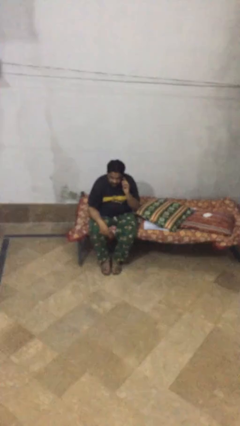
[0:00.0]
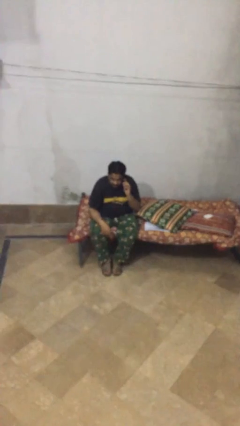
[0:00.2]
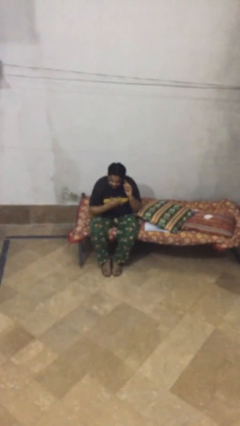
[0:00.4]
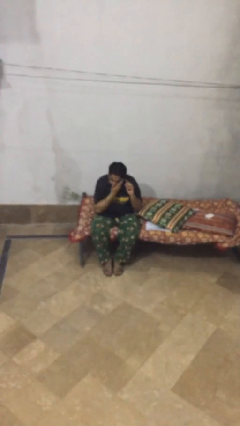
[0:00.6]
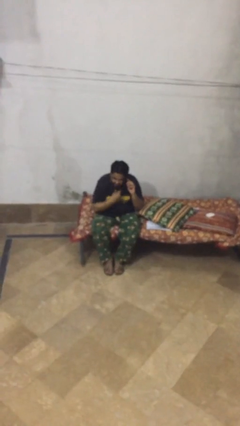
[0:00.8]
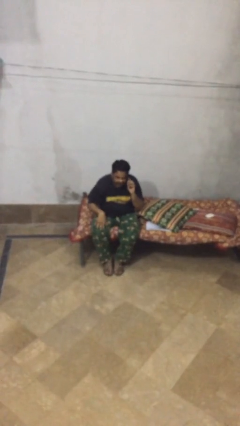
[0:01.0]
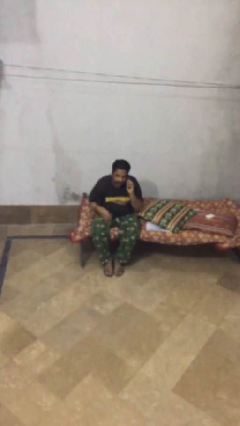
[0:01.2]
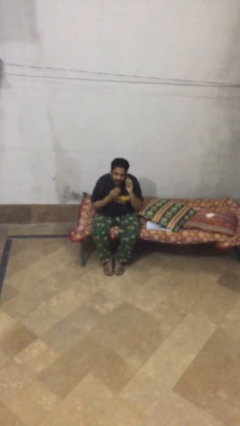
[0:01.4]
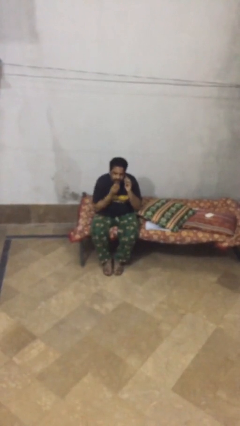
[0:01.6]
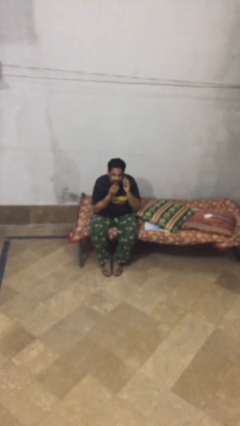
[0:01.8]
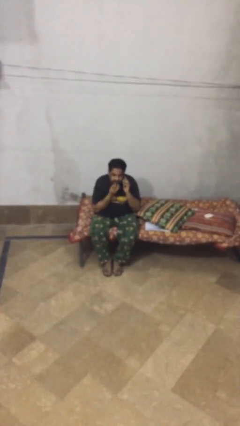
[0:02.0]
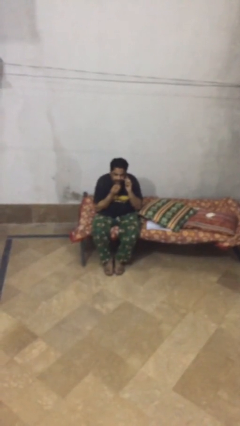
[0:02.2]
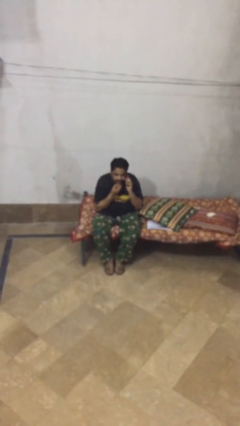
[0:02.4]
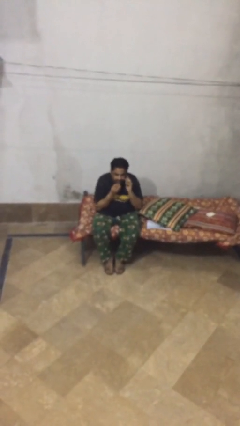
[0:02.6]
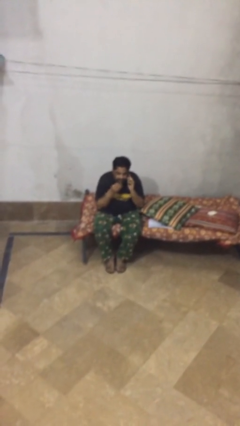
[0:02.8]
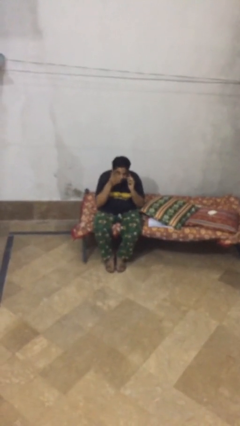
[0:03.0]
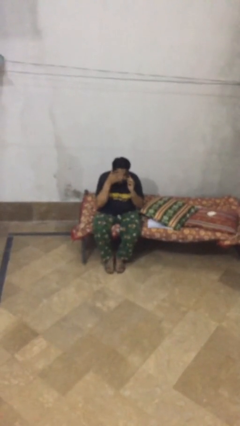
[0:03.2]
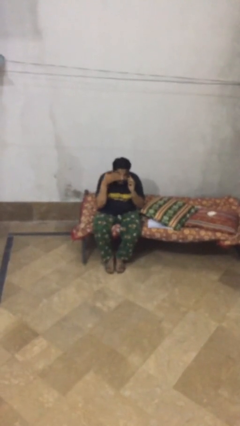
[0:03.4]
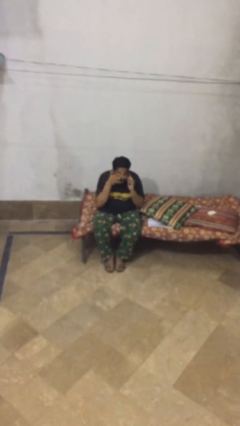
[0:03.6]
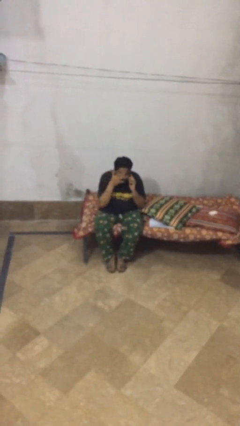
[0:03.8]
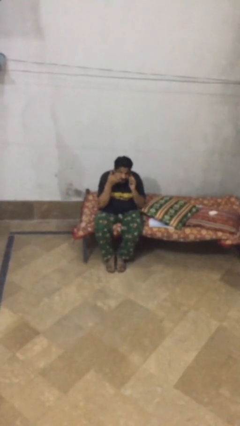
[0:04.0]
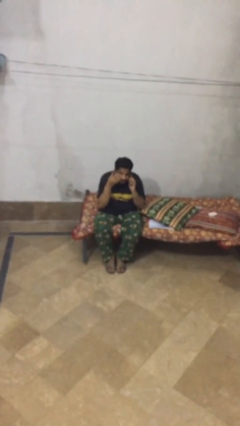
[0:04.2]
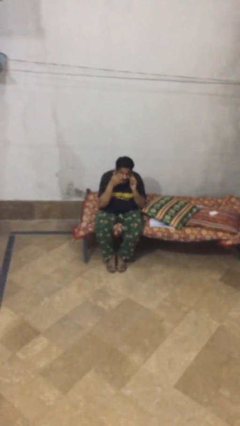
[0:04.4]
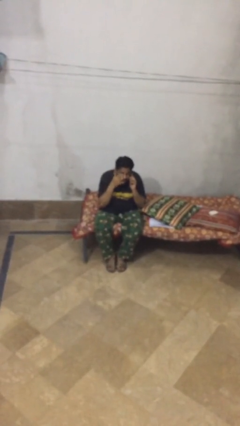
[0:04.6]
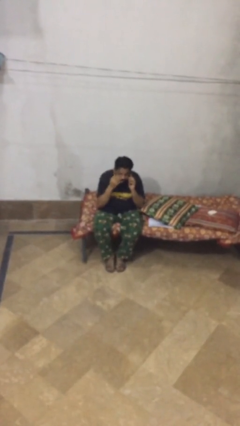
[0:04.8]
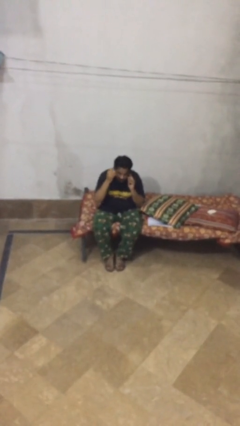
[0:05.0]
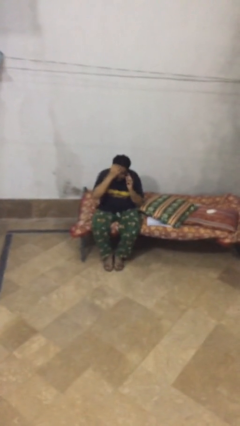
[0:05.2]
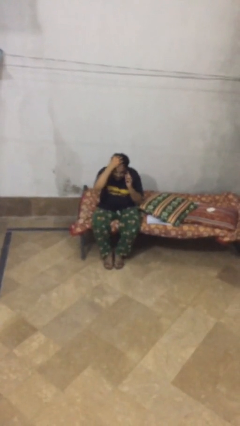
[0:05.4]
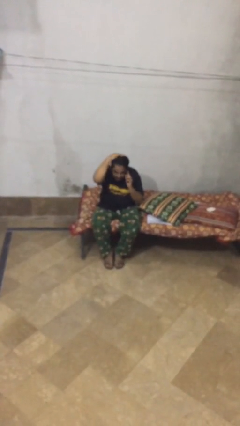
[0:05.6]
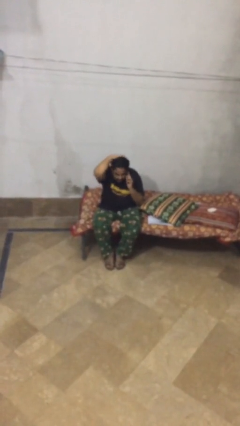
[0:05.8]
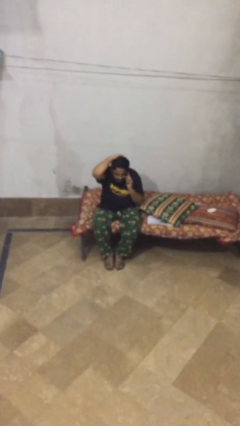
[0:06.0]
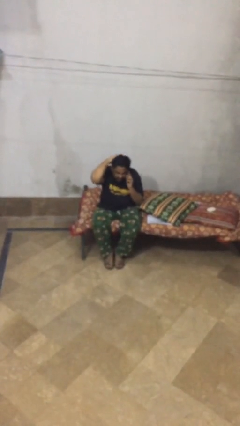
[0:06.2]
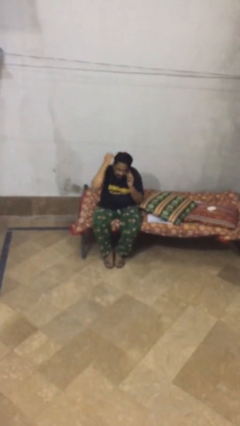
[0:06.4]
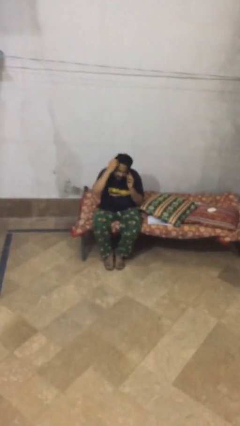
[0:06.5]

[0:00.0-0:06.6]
person talks on phone

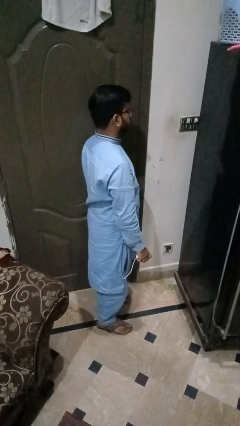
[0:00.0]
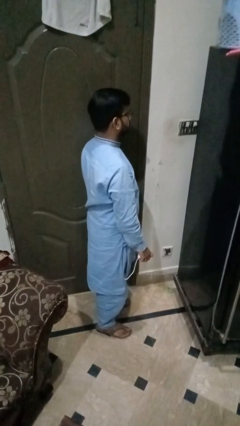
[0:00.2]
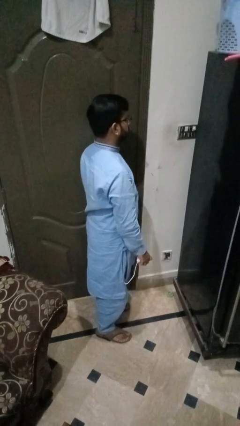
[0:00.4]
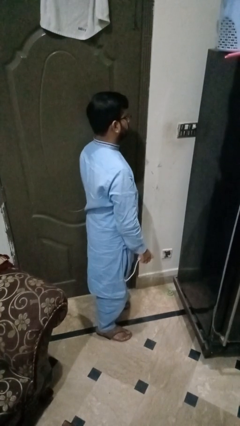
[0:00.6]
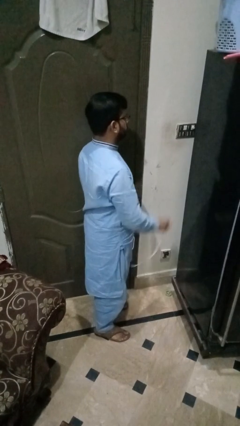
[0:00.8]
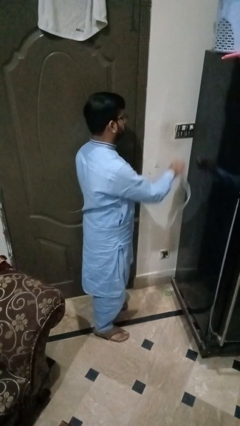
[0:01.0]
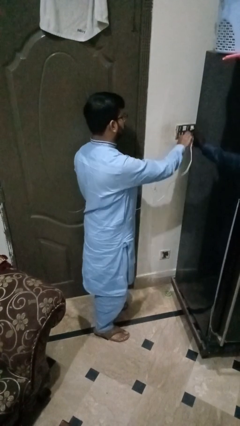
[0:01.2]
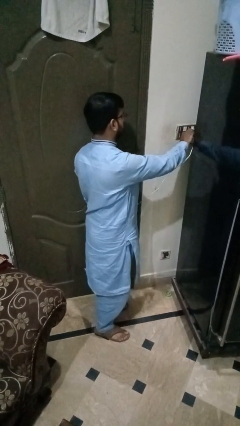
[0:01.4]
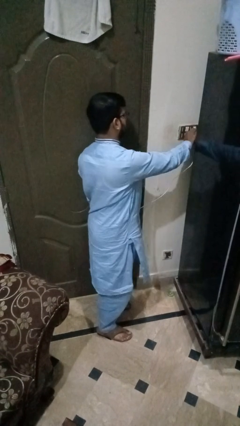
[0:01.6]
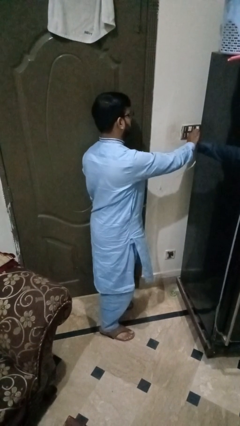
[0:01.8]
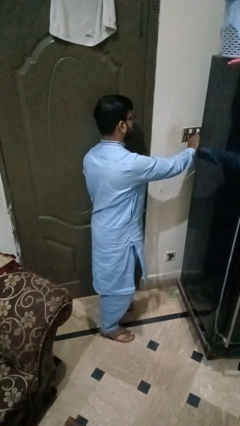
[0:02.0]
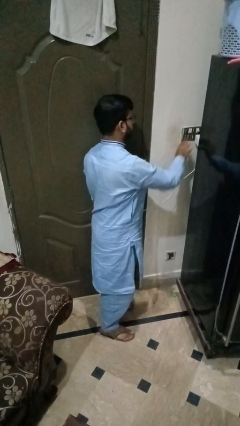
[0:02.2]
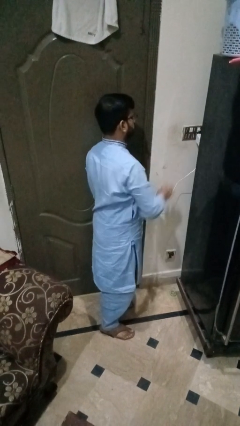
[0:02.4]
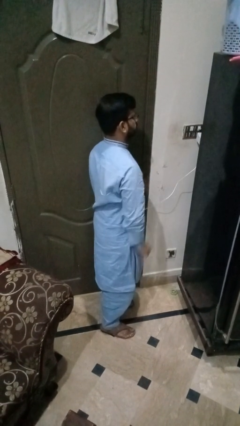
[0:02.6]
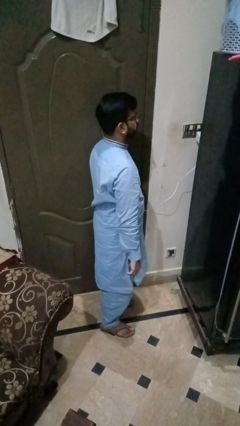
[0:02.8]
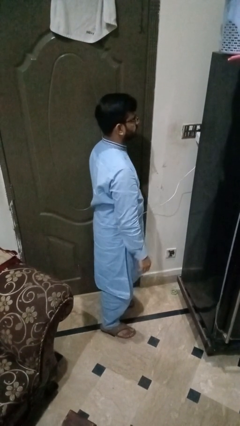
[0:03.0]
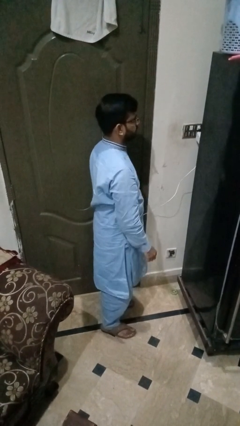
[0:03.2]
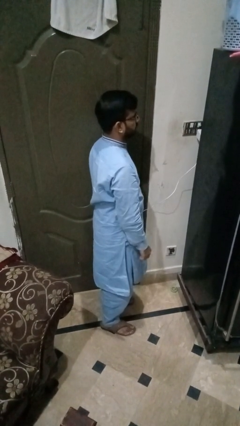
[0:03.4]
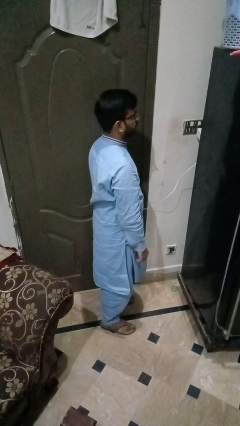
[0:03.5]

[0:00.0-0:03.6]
person plugs into electrical socket

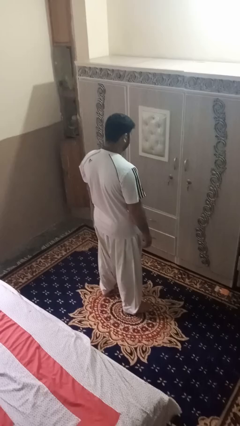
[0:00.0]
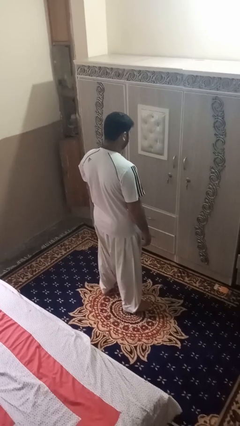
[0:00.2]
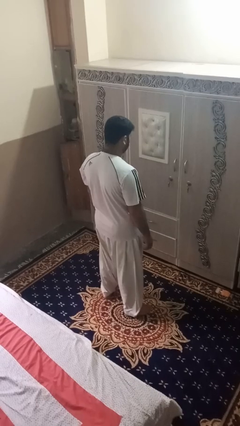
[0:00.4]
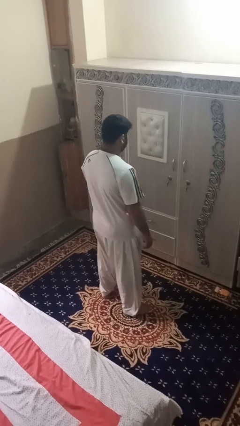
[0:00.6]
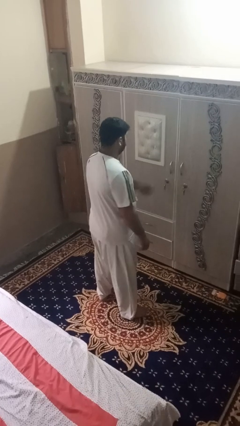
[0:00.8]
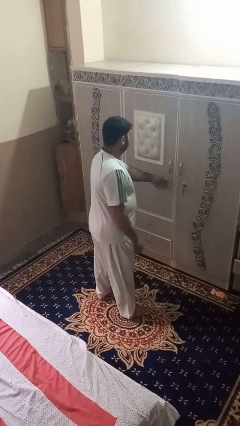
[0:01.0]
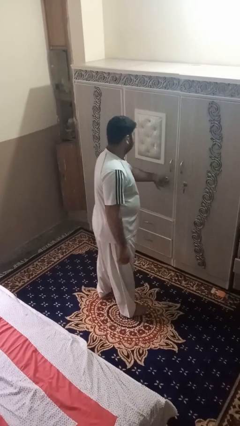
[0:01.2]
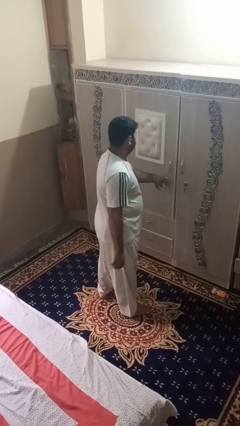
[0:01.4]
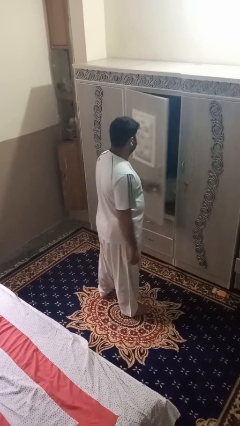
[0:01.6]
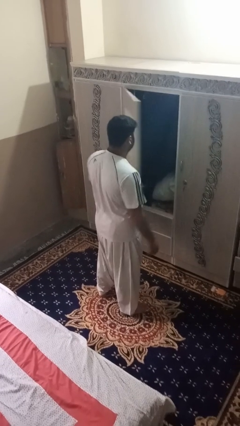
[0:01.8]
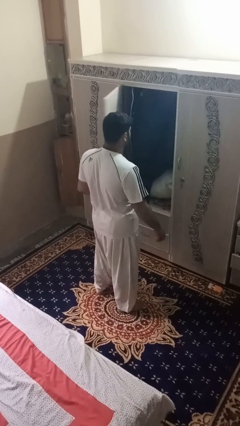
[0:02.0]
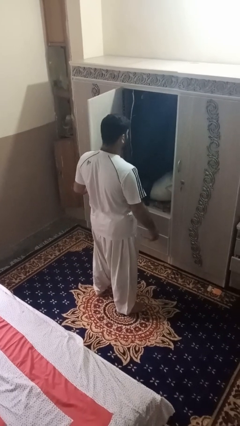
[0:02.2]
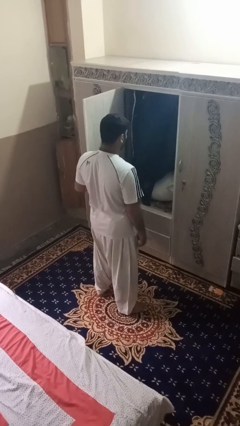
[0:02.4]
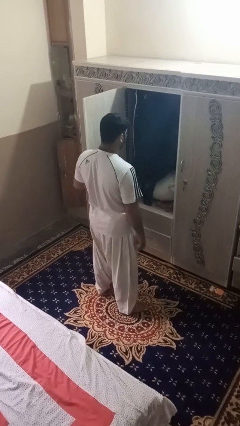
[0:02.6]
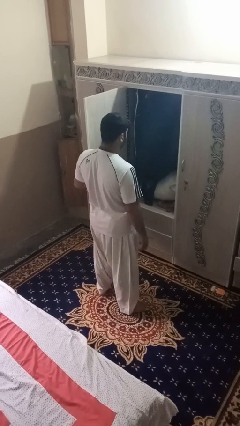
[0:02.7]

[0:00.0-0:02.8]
person opens dresser drawer

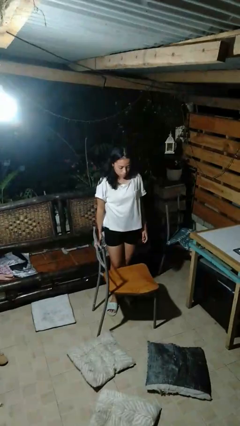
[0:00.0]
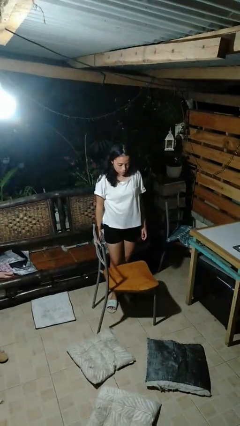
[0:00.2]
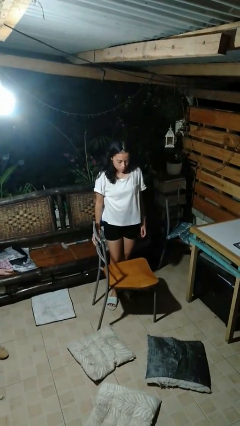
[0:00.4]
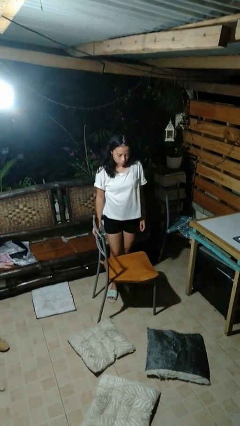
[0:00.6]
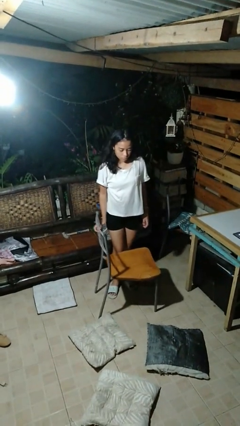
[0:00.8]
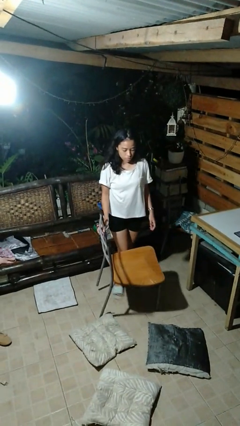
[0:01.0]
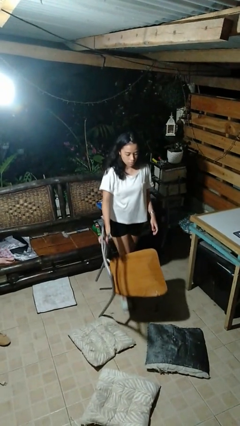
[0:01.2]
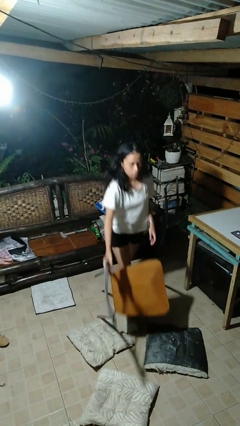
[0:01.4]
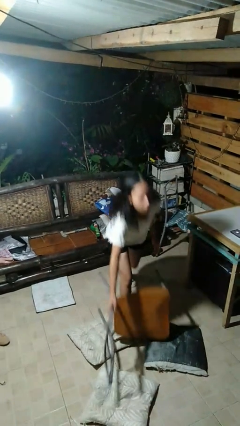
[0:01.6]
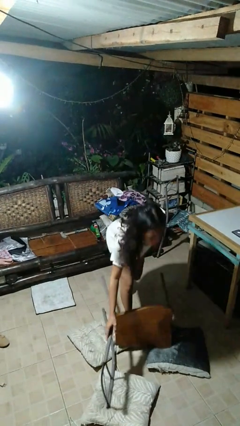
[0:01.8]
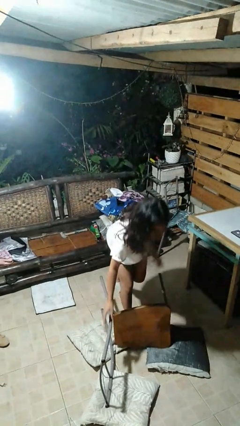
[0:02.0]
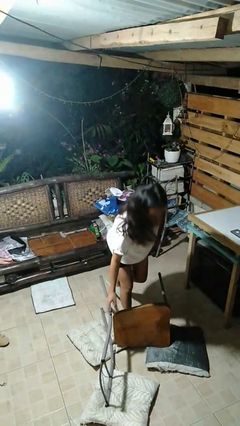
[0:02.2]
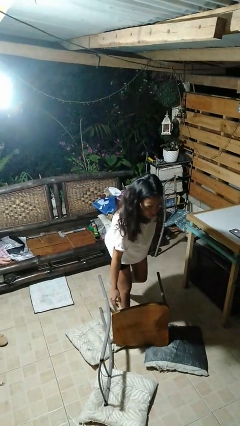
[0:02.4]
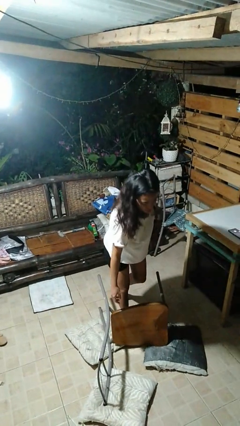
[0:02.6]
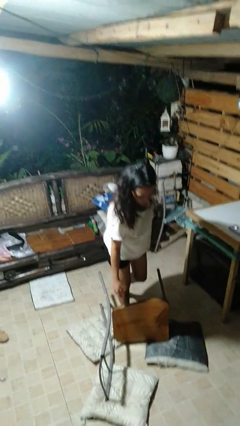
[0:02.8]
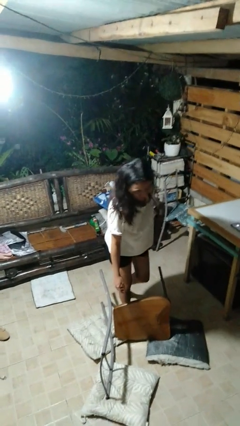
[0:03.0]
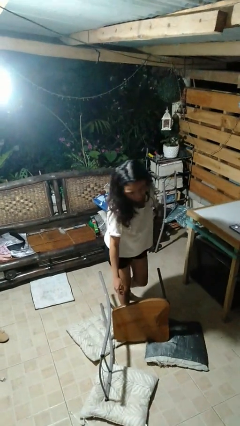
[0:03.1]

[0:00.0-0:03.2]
person knocks over furniture

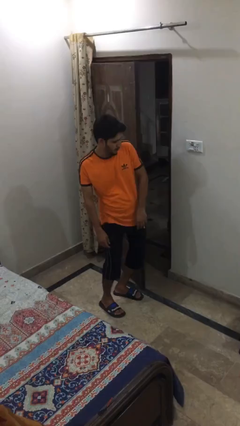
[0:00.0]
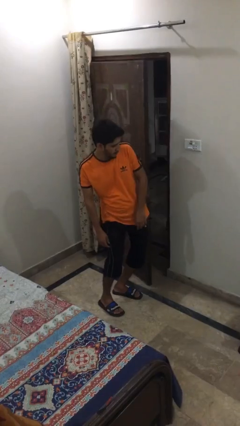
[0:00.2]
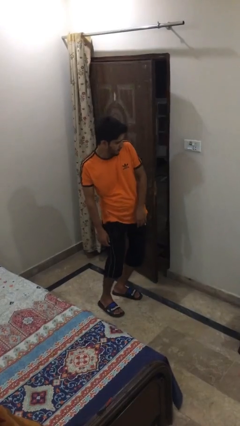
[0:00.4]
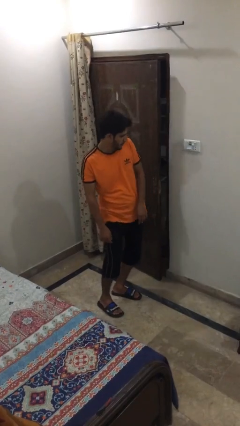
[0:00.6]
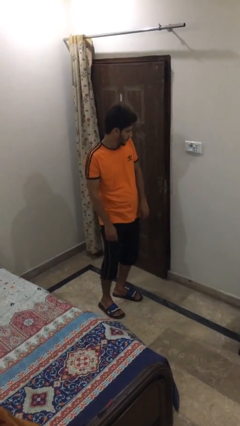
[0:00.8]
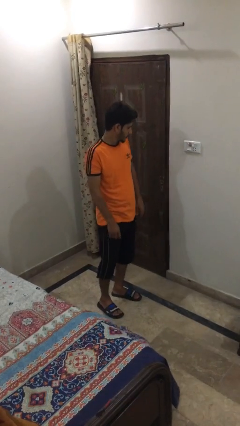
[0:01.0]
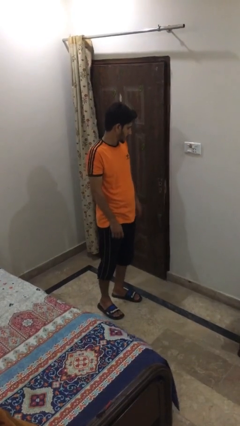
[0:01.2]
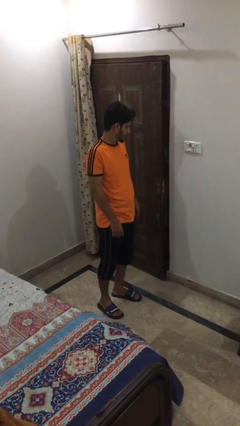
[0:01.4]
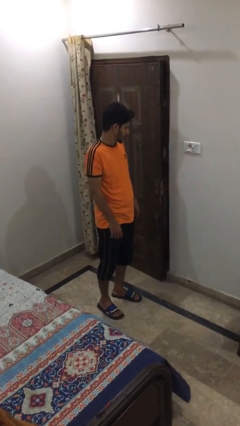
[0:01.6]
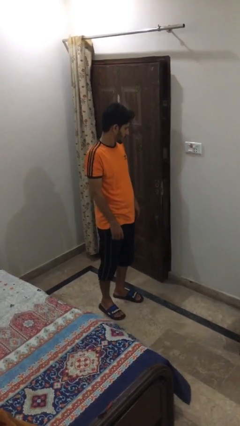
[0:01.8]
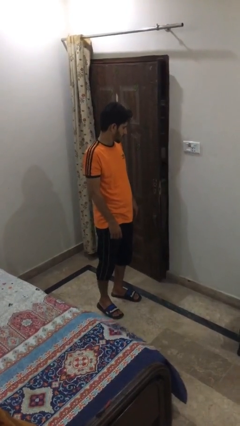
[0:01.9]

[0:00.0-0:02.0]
person closes door with hip
